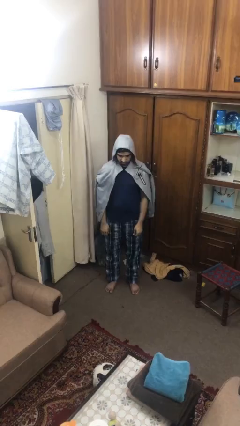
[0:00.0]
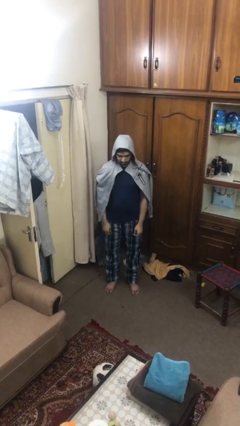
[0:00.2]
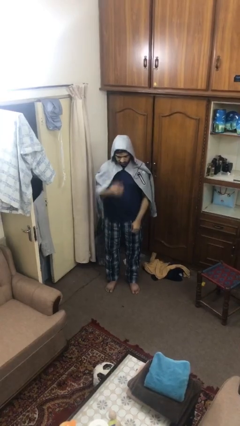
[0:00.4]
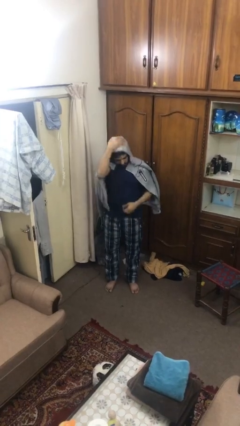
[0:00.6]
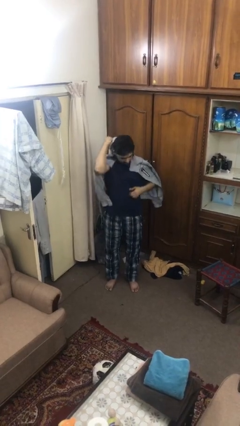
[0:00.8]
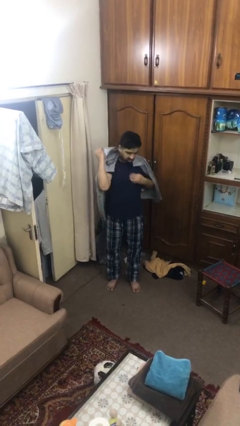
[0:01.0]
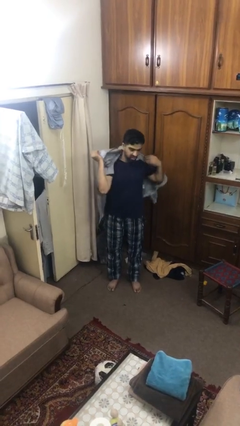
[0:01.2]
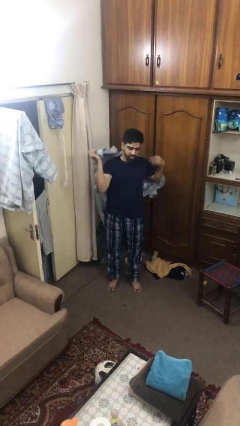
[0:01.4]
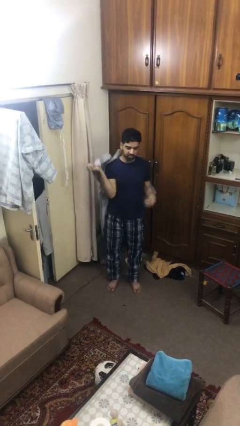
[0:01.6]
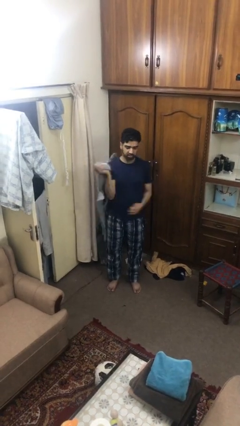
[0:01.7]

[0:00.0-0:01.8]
person takes off hoodie

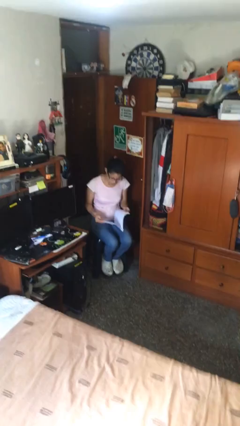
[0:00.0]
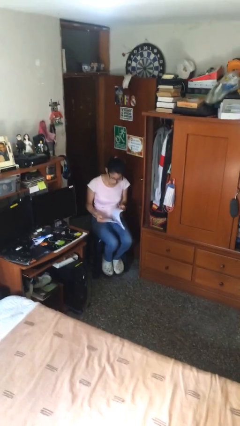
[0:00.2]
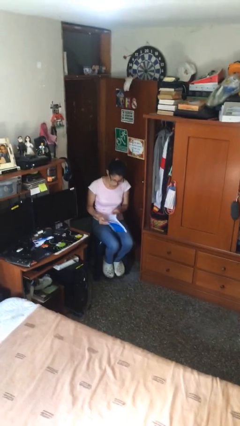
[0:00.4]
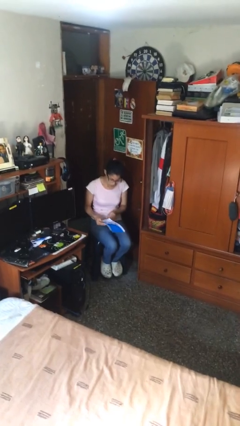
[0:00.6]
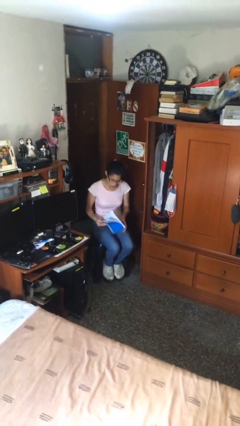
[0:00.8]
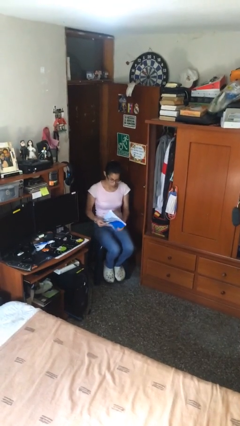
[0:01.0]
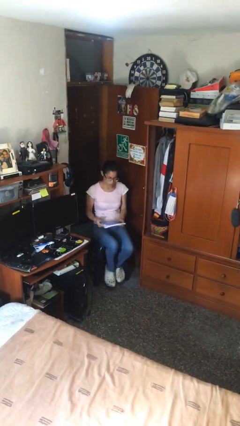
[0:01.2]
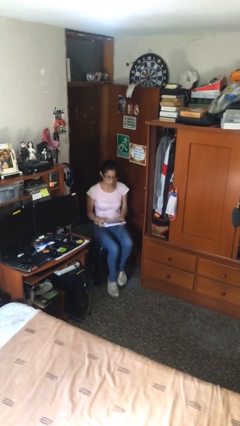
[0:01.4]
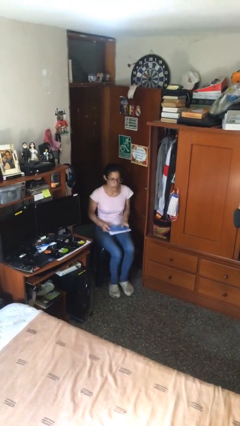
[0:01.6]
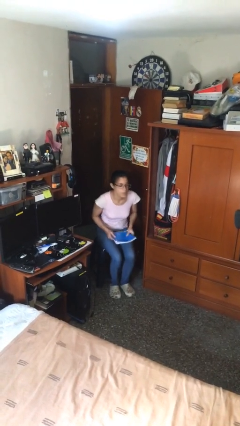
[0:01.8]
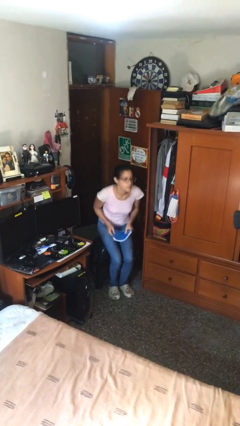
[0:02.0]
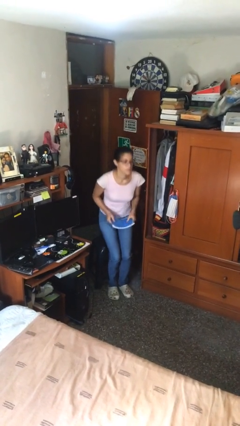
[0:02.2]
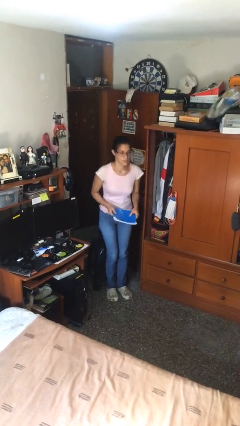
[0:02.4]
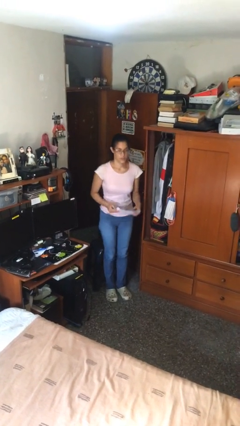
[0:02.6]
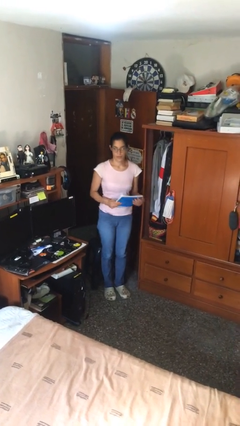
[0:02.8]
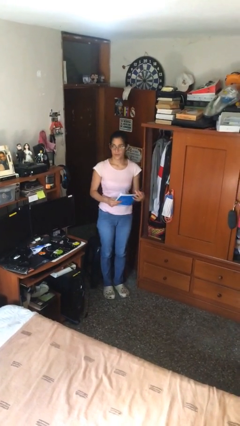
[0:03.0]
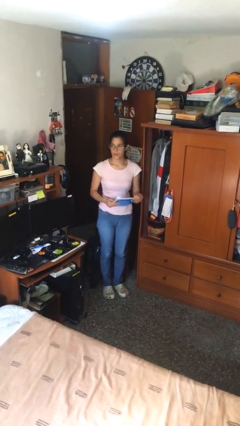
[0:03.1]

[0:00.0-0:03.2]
person stands up

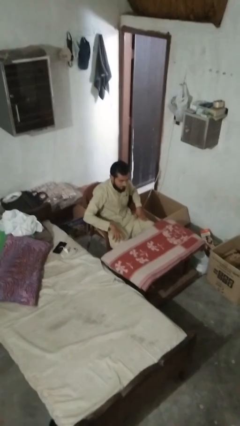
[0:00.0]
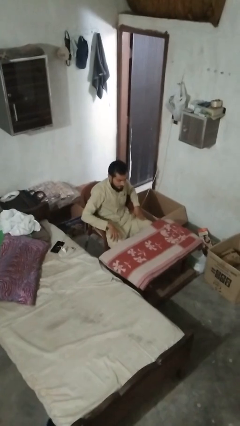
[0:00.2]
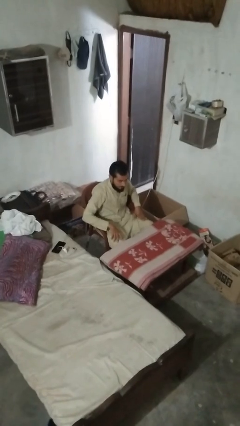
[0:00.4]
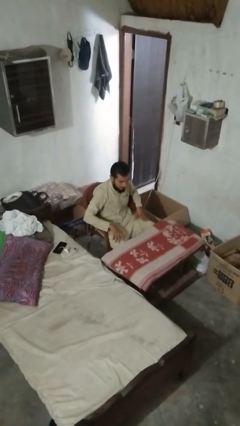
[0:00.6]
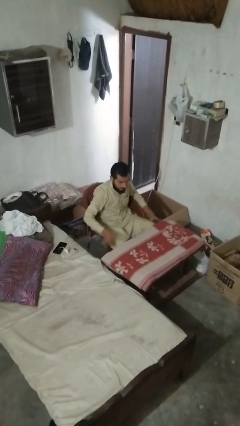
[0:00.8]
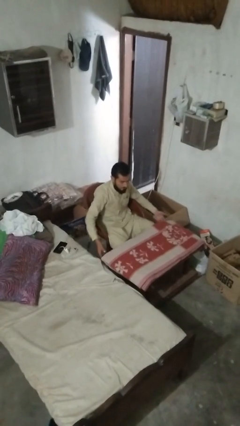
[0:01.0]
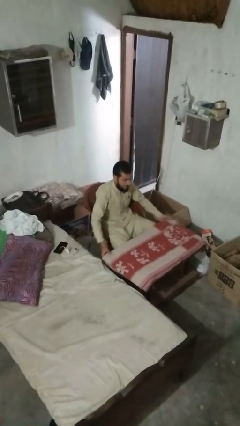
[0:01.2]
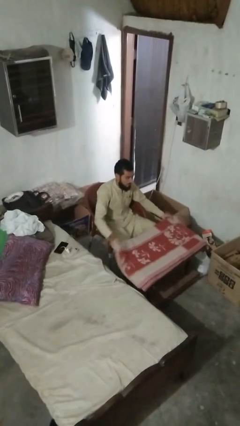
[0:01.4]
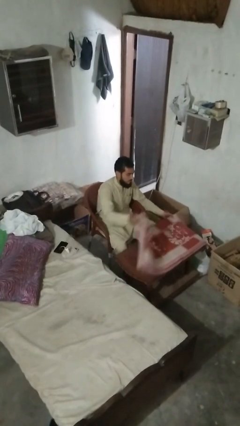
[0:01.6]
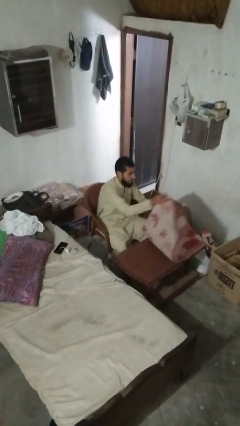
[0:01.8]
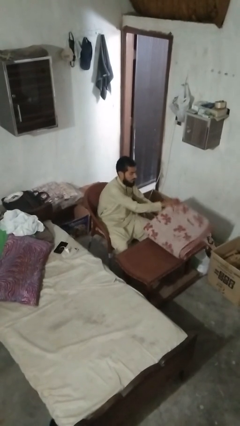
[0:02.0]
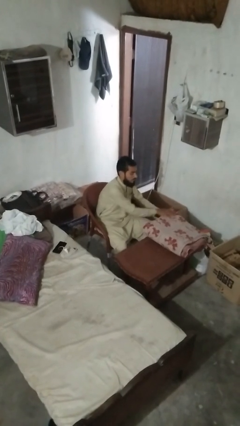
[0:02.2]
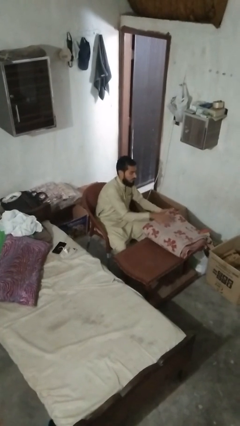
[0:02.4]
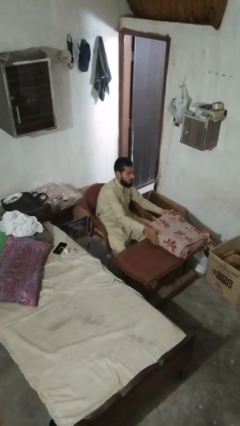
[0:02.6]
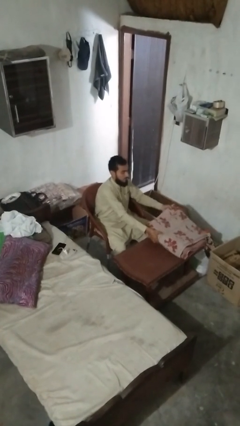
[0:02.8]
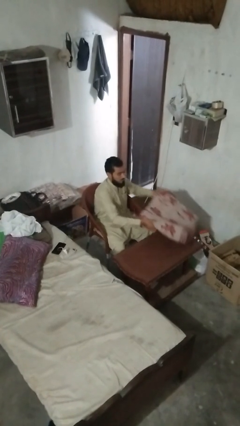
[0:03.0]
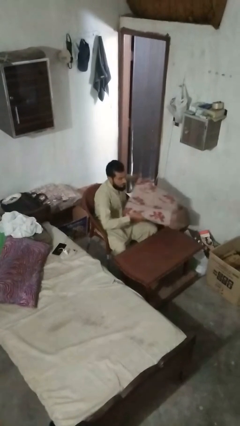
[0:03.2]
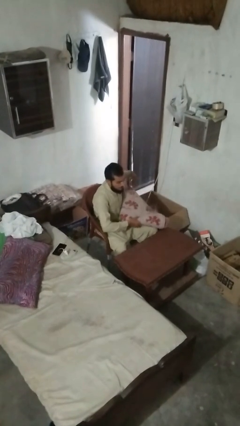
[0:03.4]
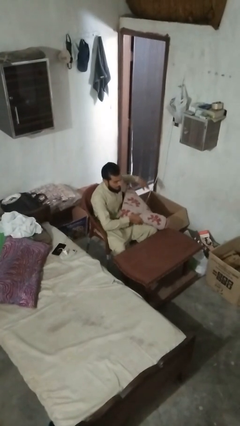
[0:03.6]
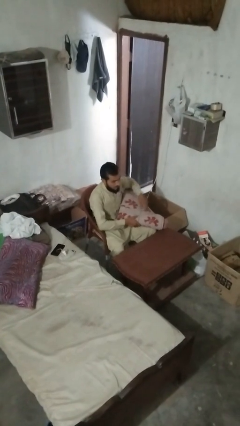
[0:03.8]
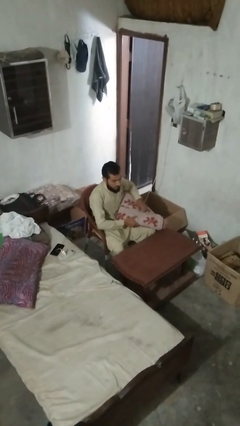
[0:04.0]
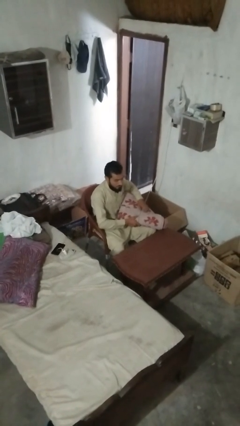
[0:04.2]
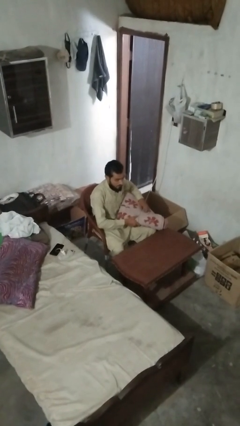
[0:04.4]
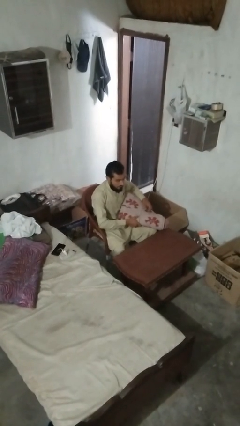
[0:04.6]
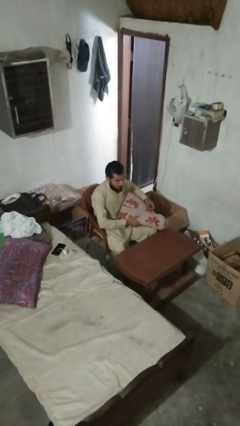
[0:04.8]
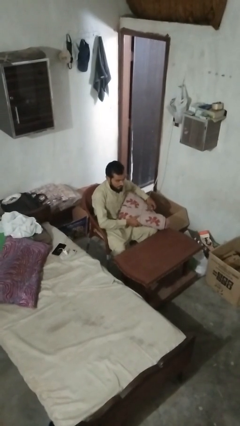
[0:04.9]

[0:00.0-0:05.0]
person folds tablecloth

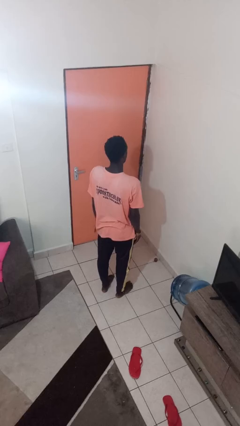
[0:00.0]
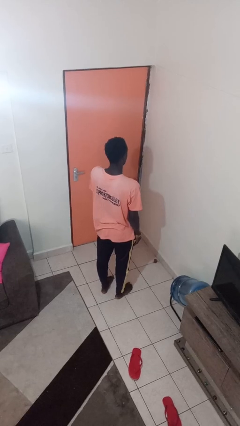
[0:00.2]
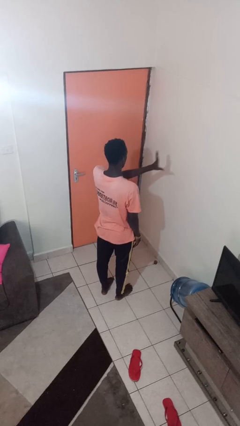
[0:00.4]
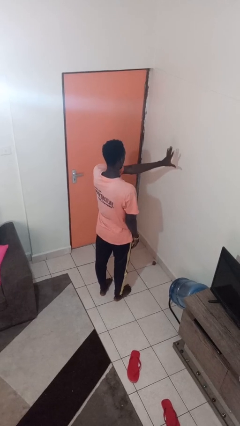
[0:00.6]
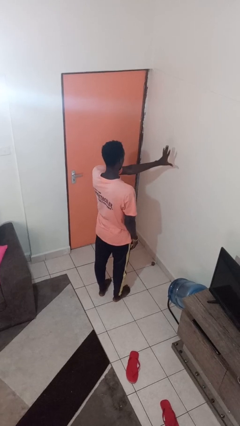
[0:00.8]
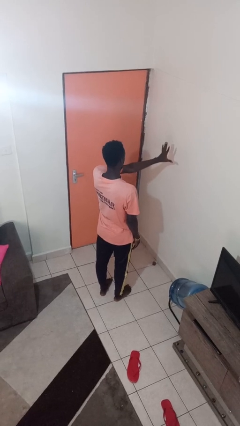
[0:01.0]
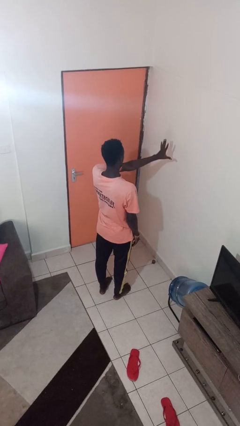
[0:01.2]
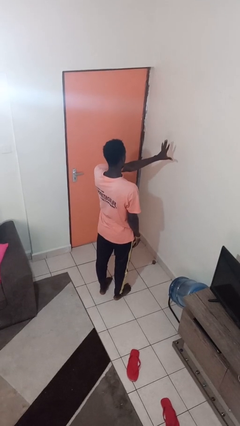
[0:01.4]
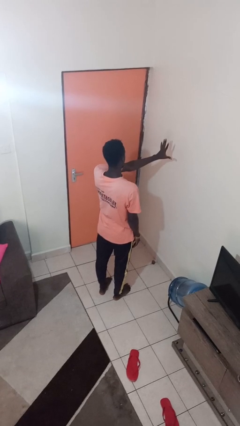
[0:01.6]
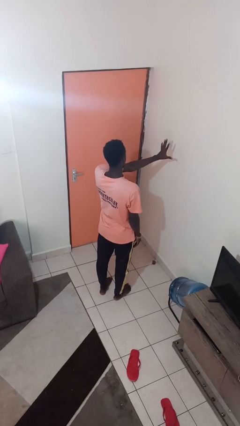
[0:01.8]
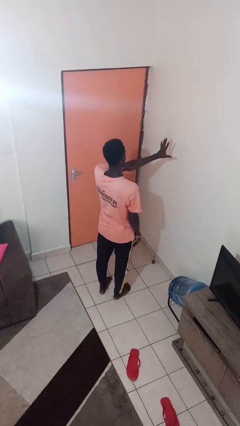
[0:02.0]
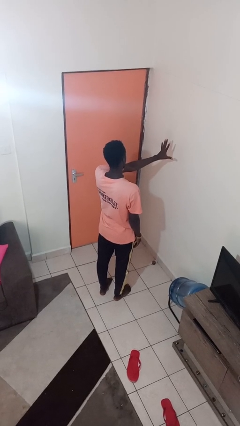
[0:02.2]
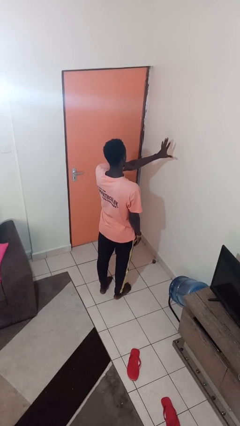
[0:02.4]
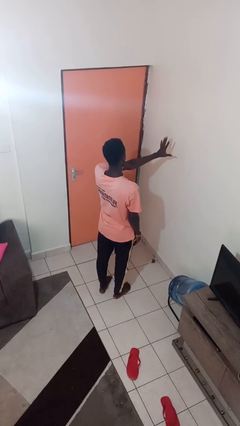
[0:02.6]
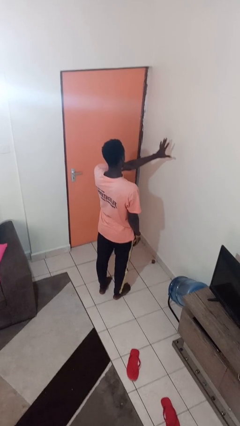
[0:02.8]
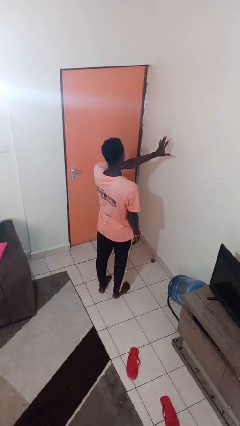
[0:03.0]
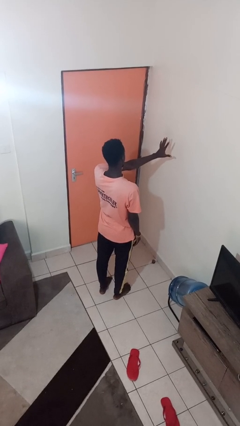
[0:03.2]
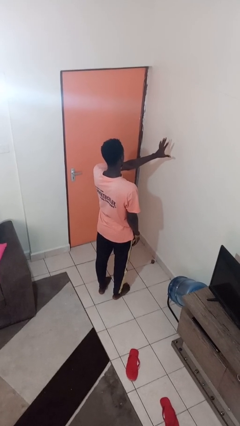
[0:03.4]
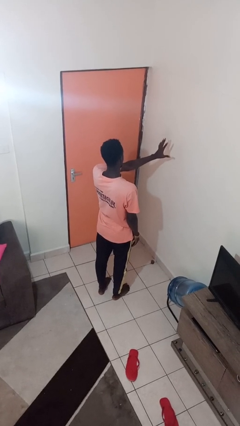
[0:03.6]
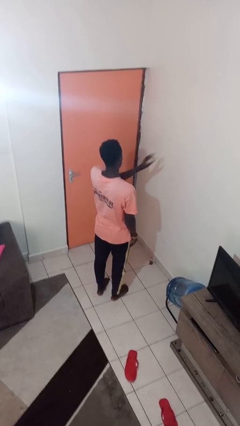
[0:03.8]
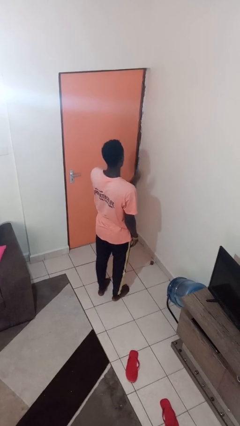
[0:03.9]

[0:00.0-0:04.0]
person gestures number five

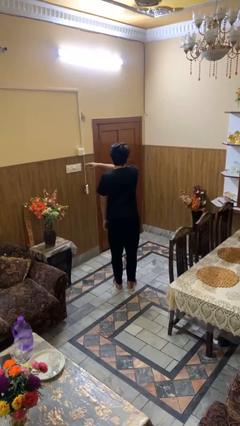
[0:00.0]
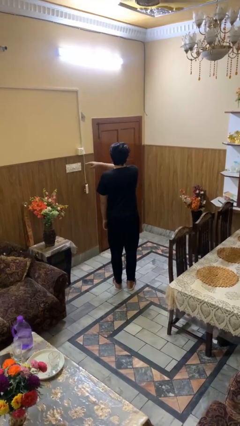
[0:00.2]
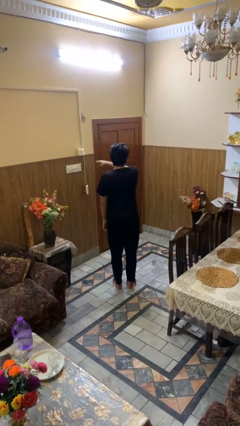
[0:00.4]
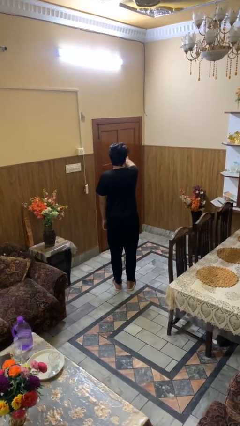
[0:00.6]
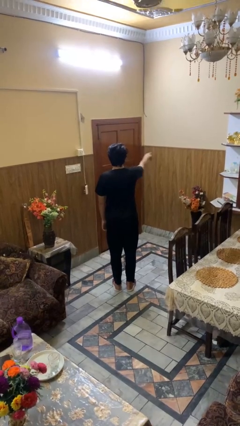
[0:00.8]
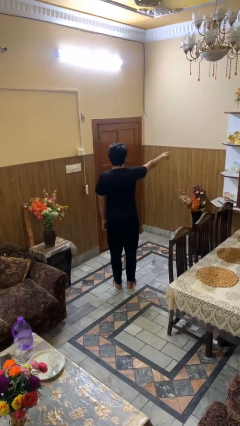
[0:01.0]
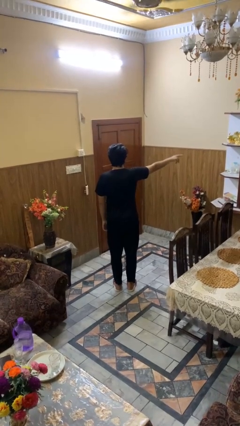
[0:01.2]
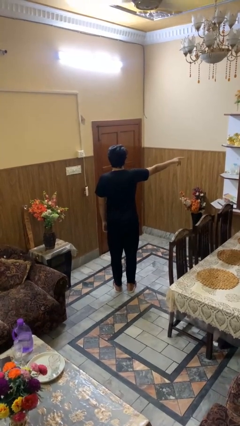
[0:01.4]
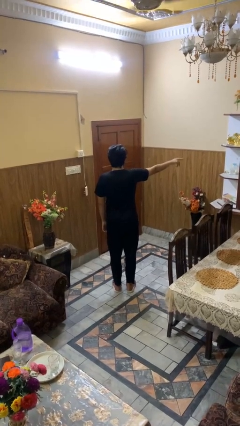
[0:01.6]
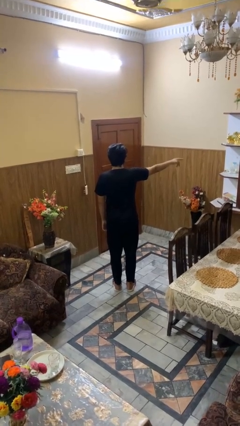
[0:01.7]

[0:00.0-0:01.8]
person gestures swipe right

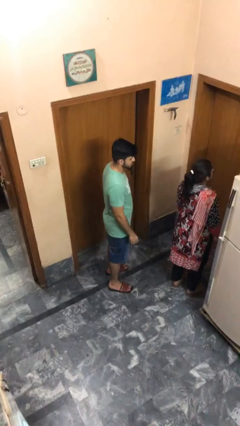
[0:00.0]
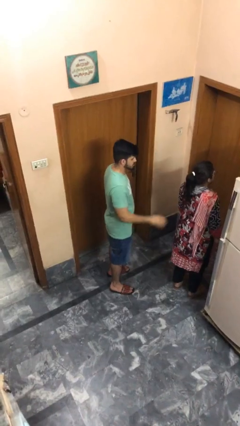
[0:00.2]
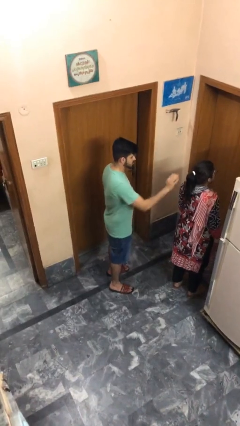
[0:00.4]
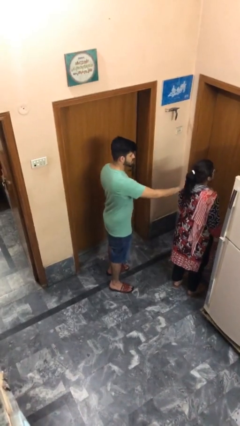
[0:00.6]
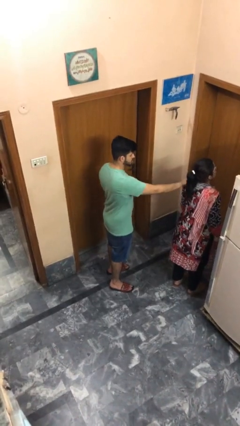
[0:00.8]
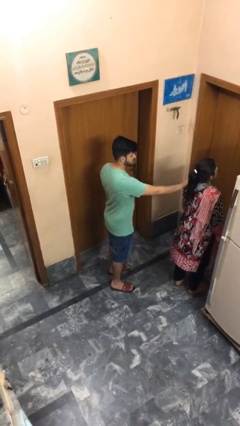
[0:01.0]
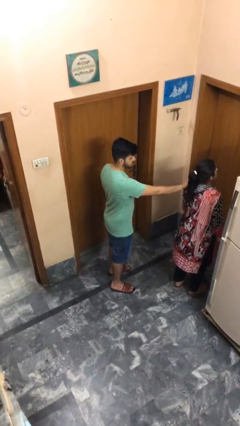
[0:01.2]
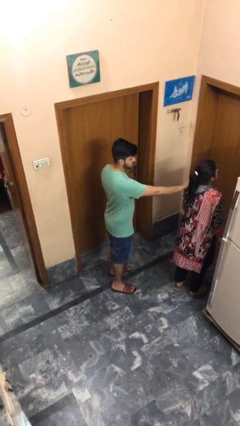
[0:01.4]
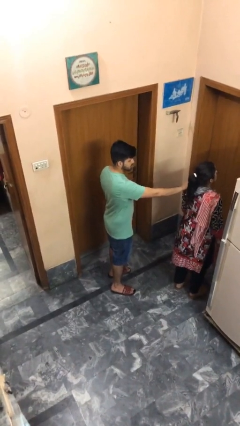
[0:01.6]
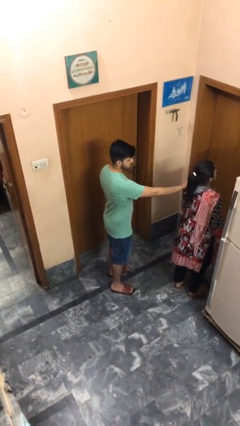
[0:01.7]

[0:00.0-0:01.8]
person grabs person by shoulder

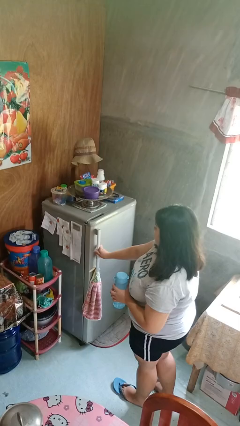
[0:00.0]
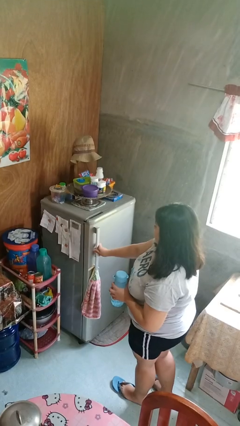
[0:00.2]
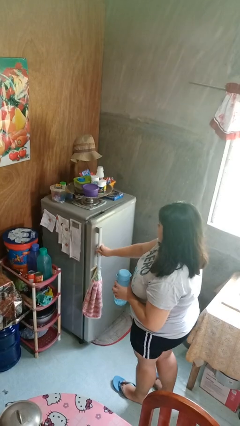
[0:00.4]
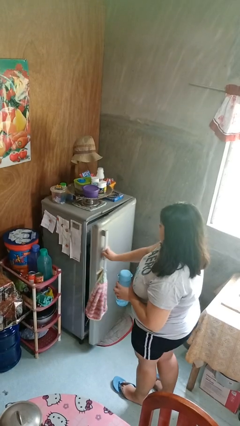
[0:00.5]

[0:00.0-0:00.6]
person opens refrigerator
